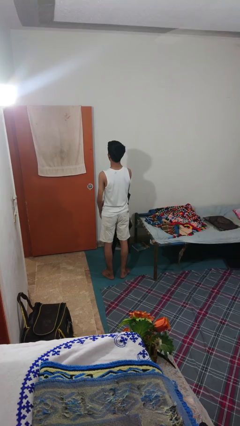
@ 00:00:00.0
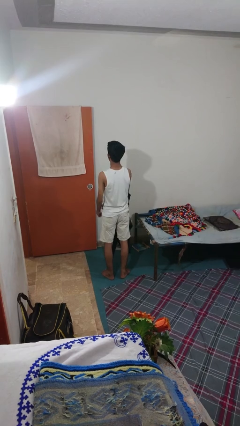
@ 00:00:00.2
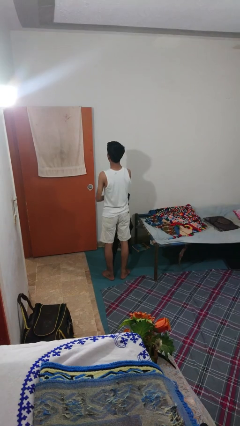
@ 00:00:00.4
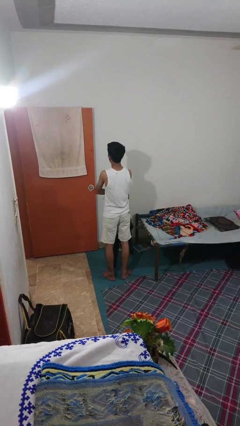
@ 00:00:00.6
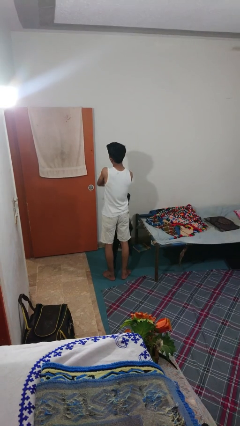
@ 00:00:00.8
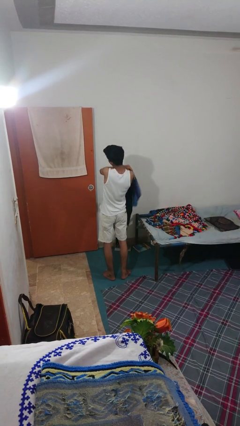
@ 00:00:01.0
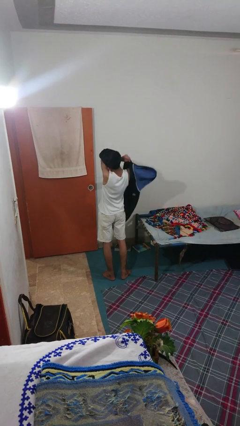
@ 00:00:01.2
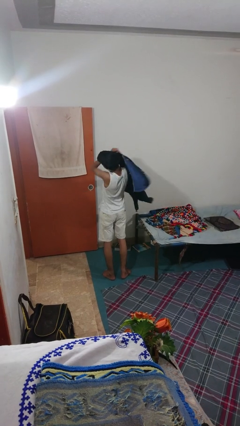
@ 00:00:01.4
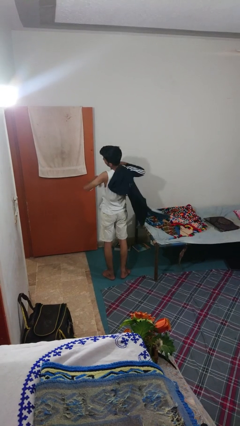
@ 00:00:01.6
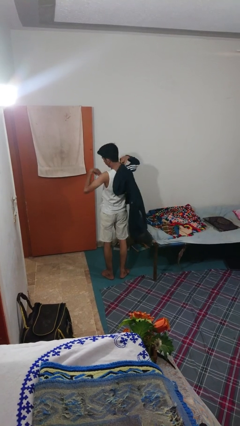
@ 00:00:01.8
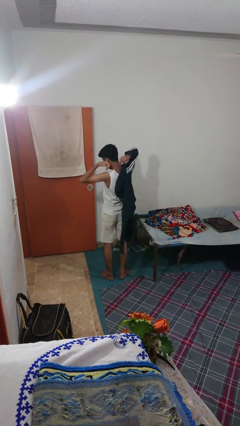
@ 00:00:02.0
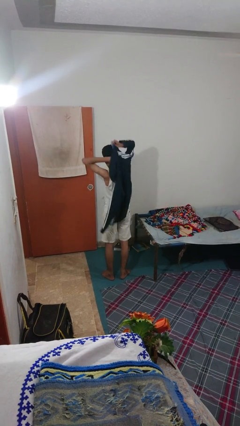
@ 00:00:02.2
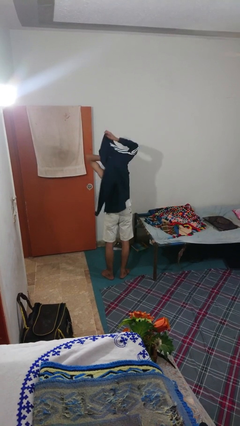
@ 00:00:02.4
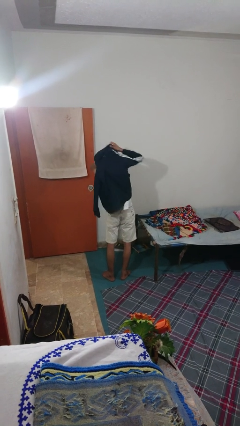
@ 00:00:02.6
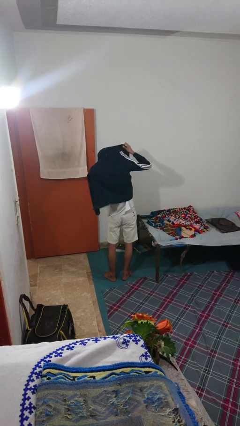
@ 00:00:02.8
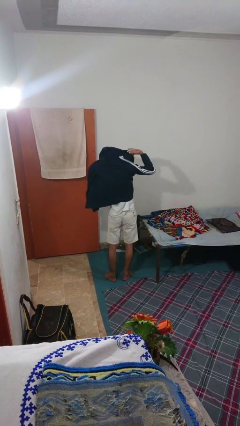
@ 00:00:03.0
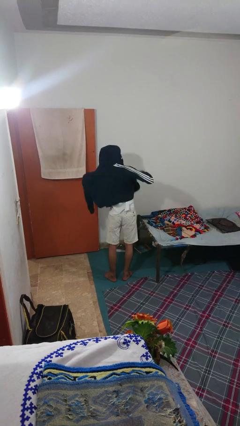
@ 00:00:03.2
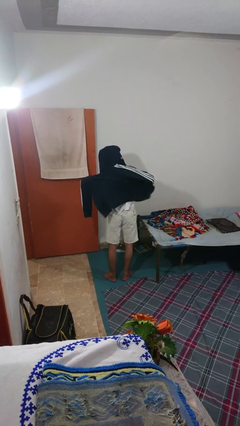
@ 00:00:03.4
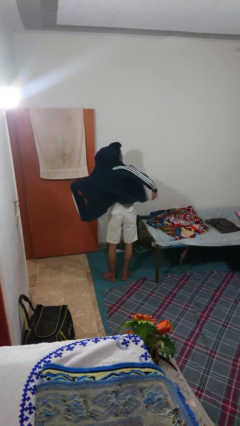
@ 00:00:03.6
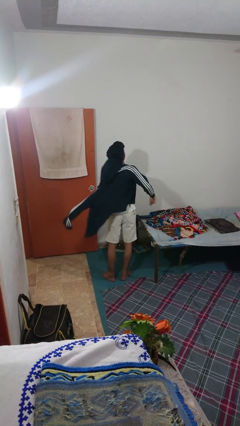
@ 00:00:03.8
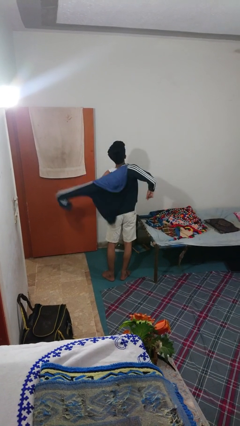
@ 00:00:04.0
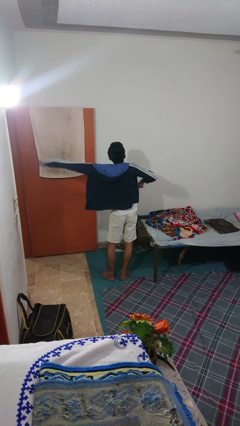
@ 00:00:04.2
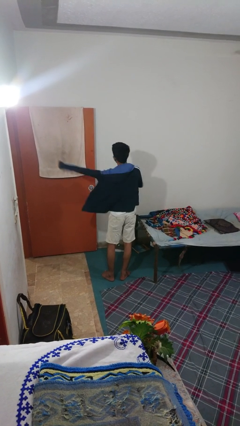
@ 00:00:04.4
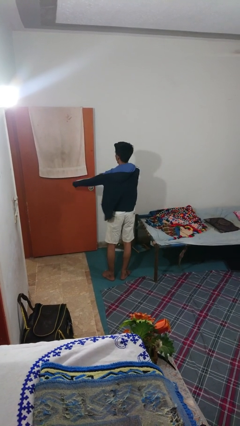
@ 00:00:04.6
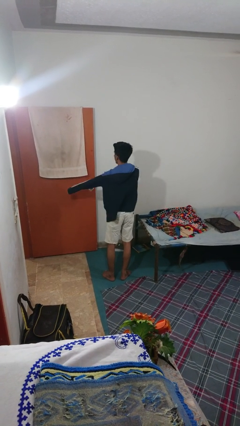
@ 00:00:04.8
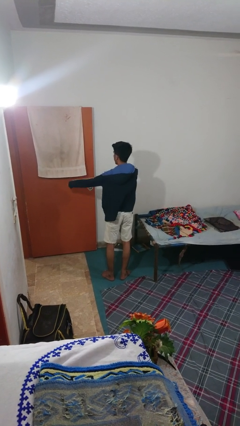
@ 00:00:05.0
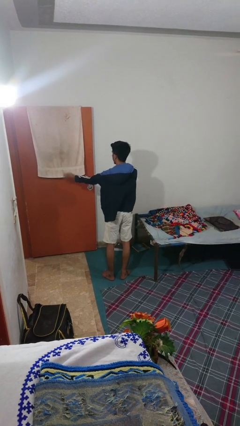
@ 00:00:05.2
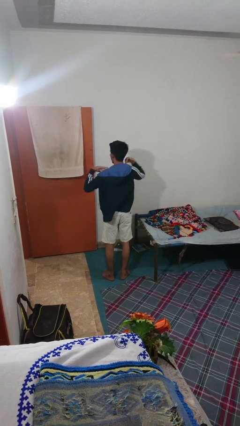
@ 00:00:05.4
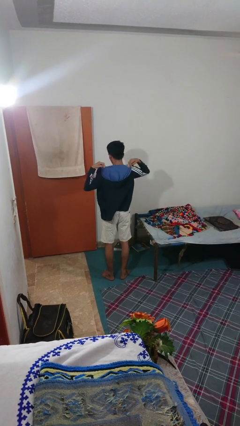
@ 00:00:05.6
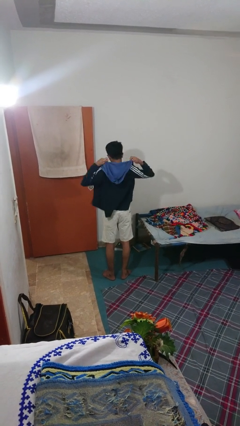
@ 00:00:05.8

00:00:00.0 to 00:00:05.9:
person puts on hoodie

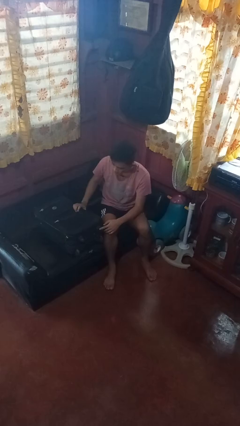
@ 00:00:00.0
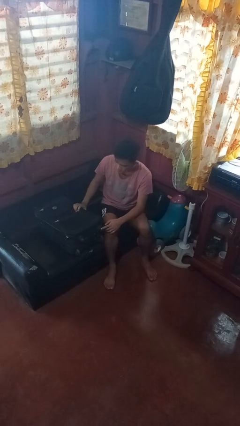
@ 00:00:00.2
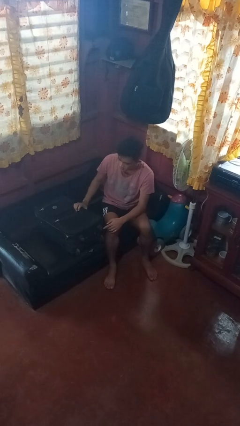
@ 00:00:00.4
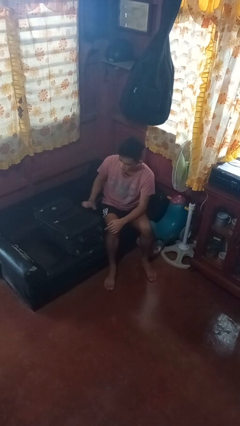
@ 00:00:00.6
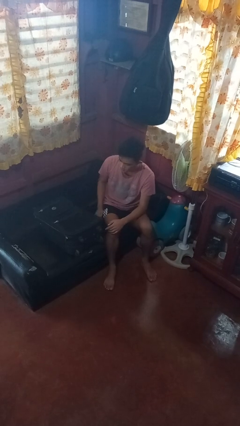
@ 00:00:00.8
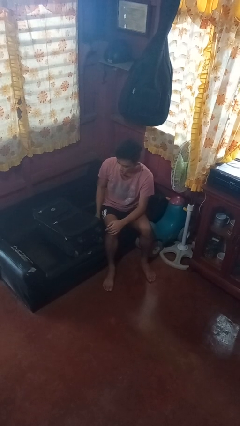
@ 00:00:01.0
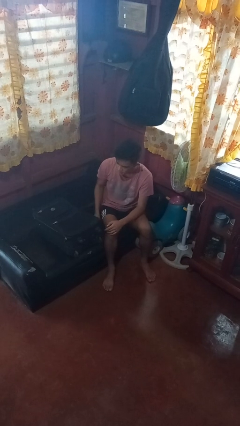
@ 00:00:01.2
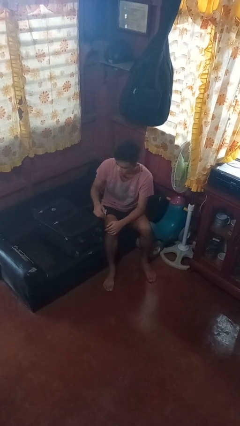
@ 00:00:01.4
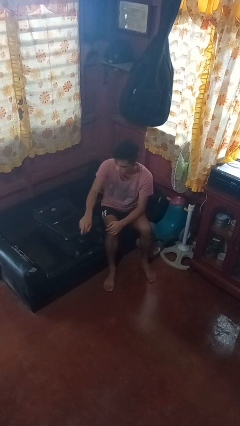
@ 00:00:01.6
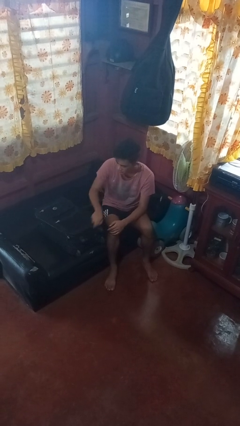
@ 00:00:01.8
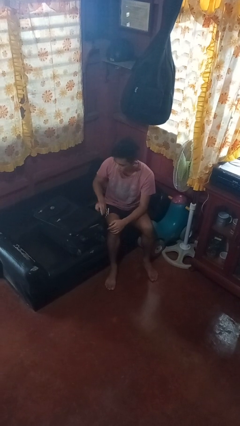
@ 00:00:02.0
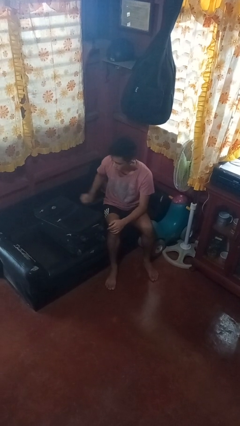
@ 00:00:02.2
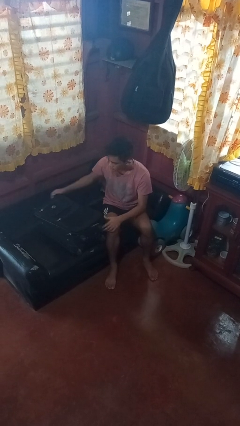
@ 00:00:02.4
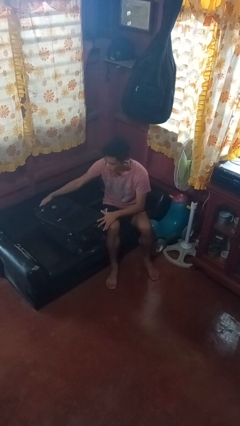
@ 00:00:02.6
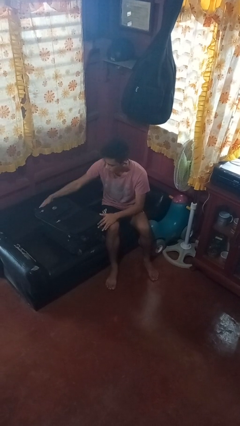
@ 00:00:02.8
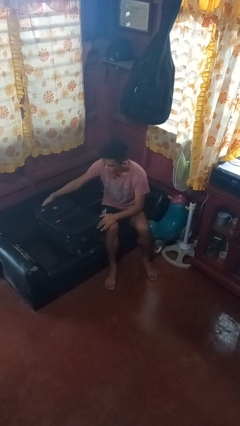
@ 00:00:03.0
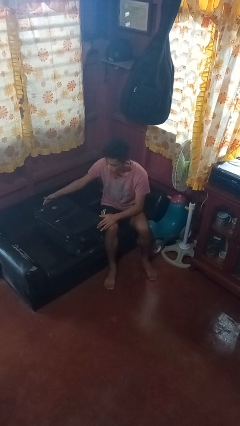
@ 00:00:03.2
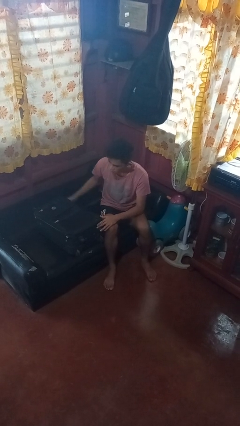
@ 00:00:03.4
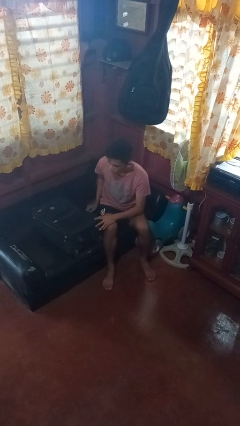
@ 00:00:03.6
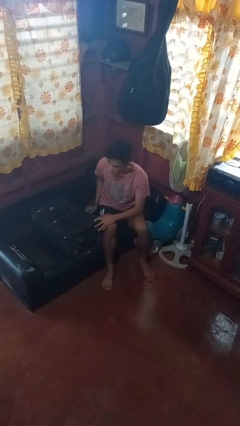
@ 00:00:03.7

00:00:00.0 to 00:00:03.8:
person closes suitcase

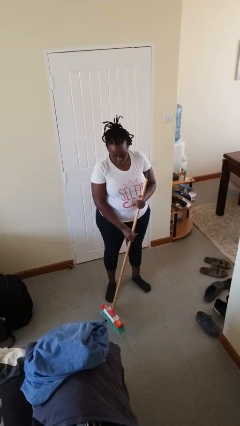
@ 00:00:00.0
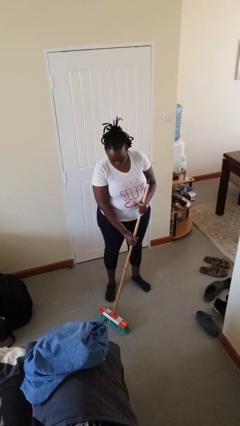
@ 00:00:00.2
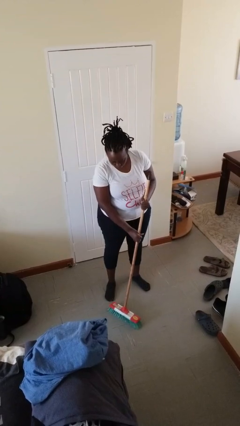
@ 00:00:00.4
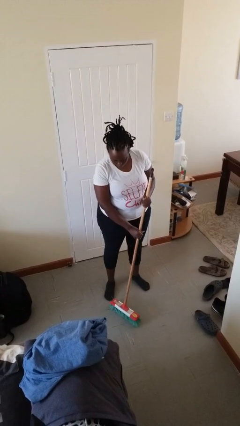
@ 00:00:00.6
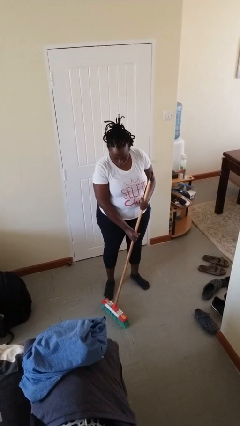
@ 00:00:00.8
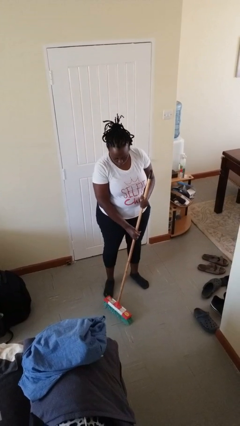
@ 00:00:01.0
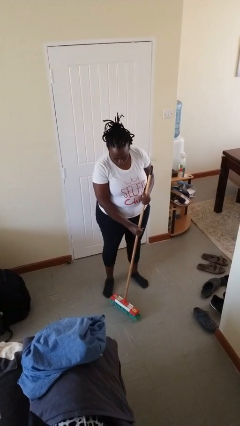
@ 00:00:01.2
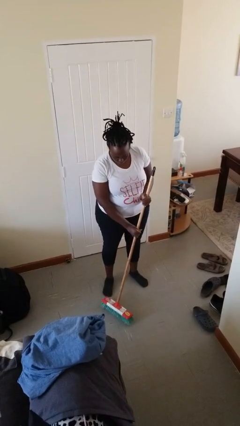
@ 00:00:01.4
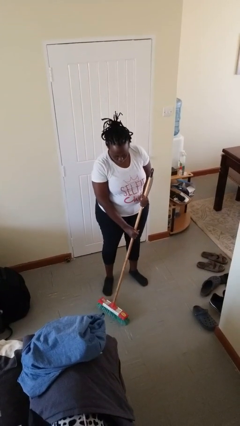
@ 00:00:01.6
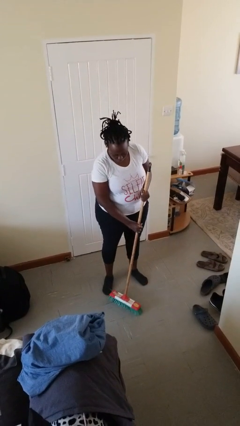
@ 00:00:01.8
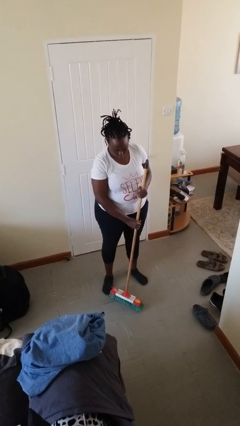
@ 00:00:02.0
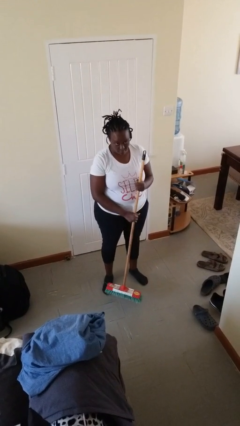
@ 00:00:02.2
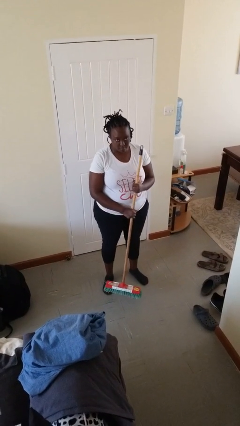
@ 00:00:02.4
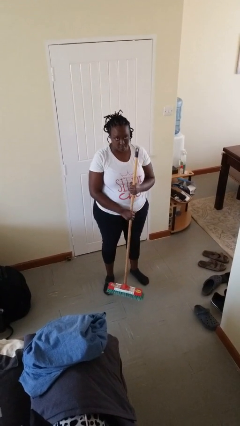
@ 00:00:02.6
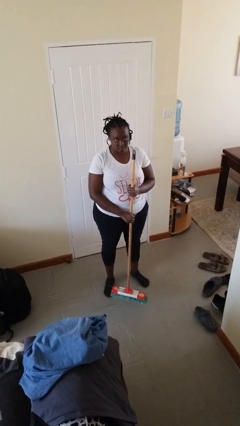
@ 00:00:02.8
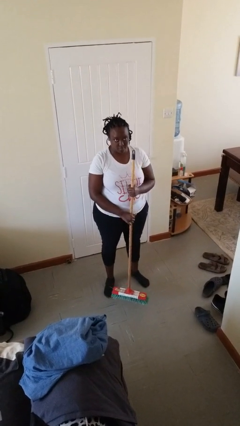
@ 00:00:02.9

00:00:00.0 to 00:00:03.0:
person sweeps floor

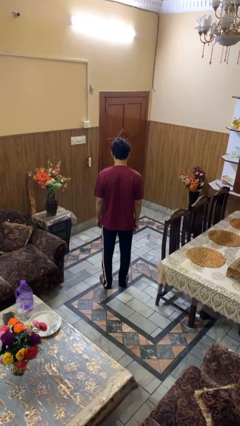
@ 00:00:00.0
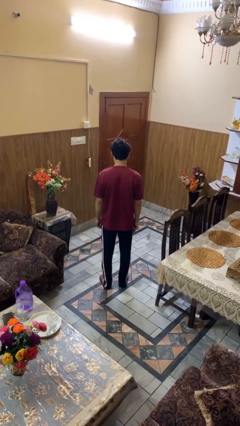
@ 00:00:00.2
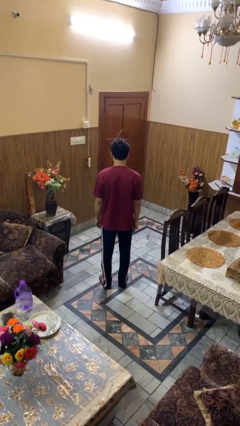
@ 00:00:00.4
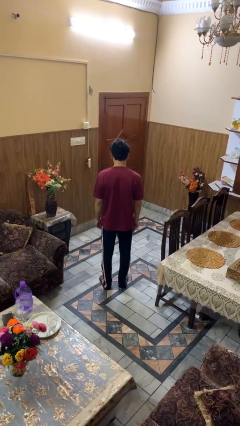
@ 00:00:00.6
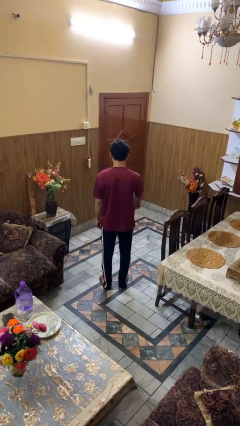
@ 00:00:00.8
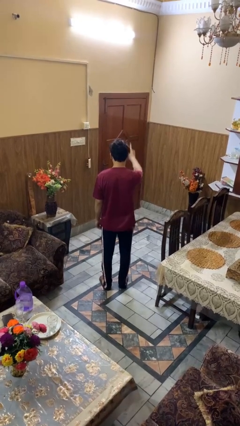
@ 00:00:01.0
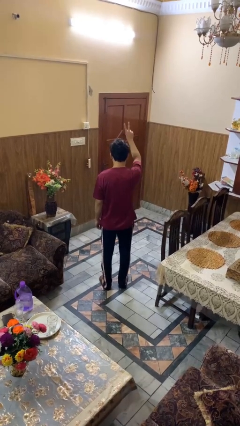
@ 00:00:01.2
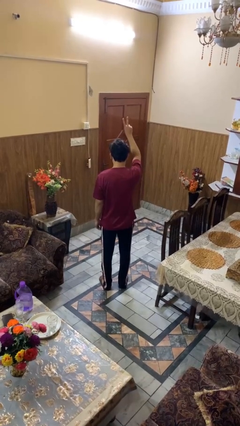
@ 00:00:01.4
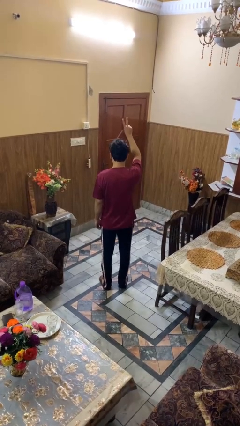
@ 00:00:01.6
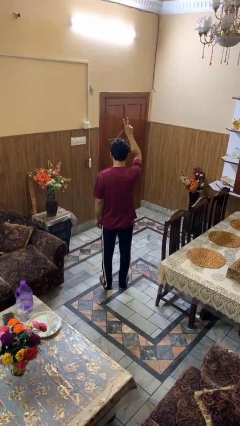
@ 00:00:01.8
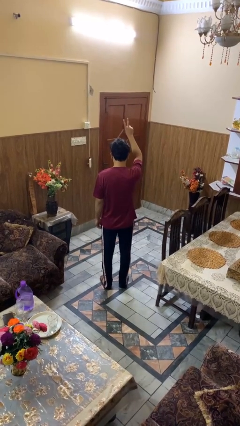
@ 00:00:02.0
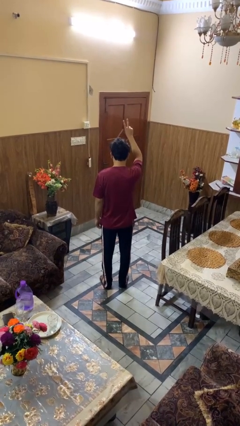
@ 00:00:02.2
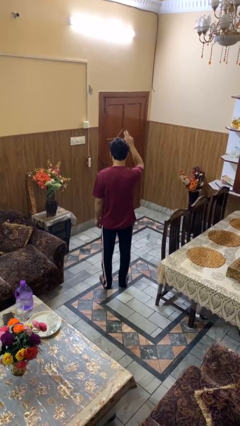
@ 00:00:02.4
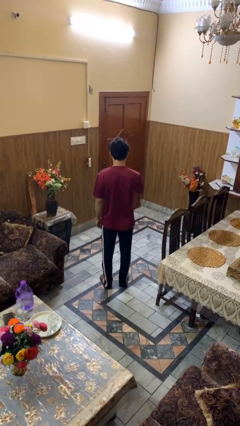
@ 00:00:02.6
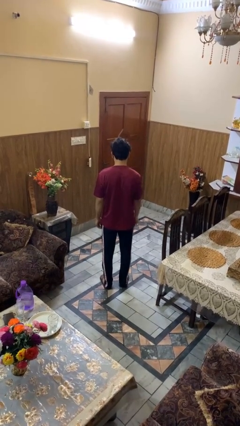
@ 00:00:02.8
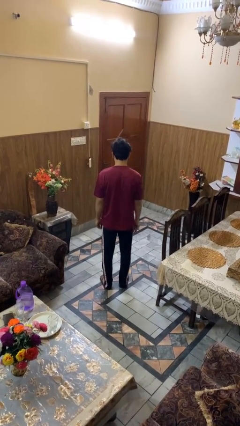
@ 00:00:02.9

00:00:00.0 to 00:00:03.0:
person gestures peace

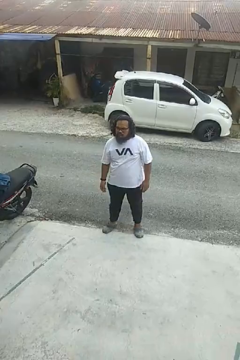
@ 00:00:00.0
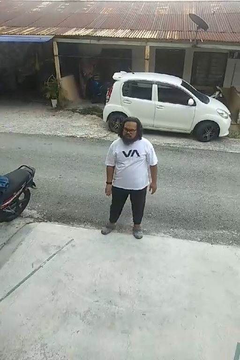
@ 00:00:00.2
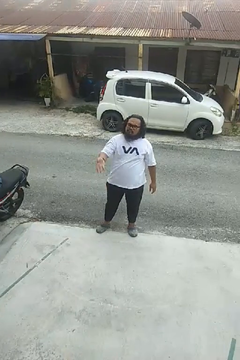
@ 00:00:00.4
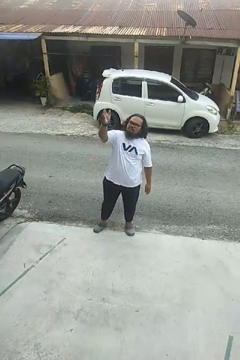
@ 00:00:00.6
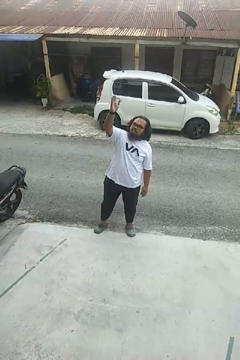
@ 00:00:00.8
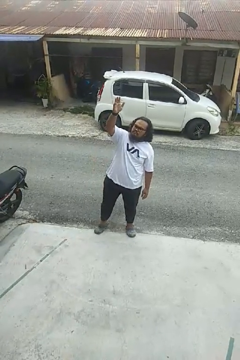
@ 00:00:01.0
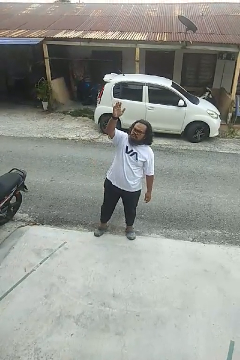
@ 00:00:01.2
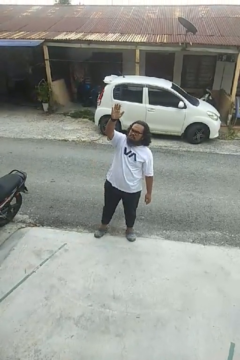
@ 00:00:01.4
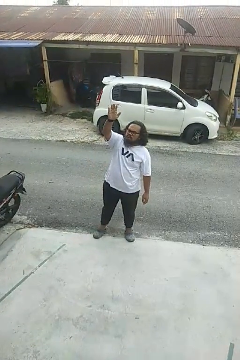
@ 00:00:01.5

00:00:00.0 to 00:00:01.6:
person gestures swipe up
